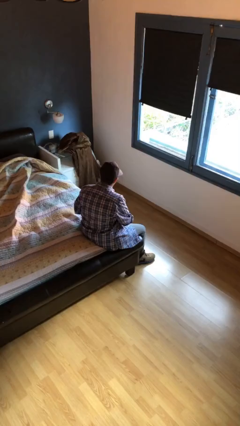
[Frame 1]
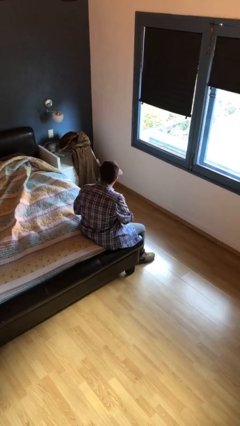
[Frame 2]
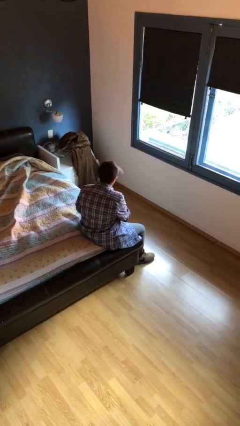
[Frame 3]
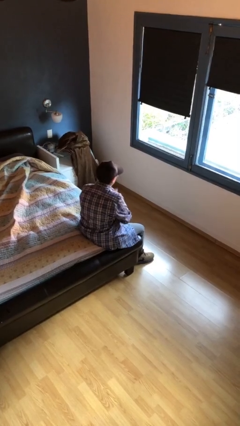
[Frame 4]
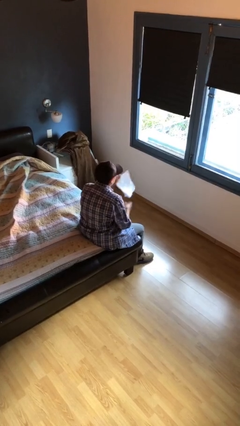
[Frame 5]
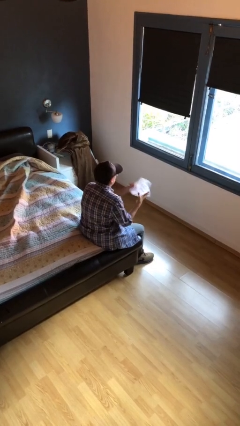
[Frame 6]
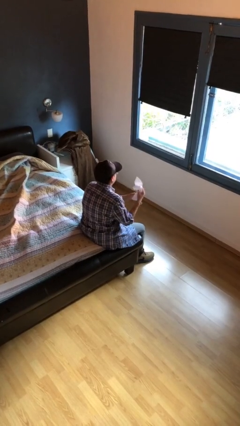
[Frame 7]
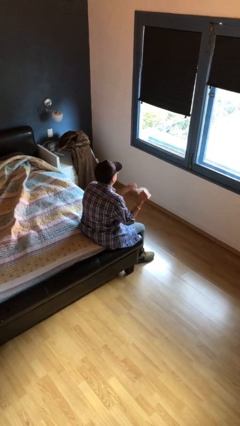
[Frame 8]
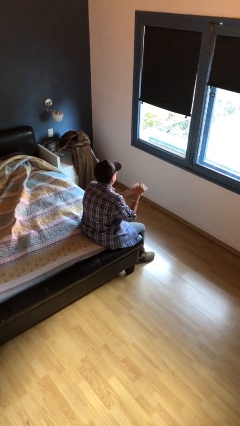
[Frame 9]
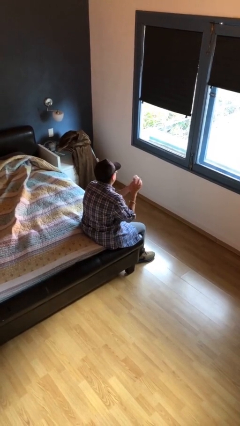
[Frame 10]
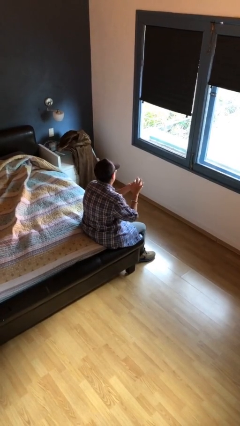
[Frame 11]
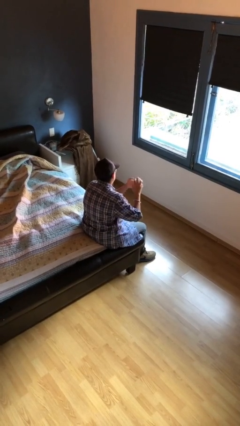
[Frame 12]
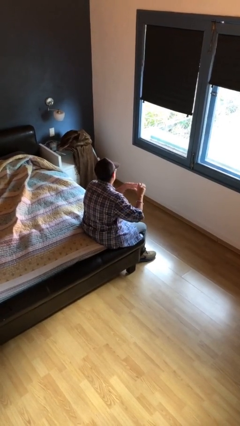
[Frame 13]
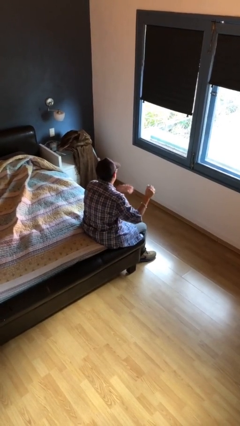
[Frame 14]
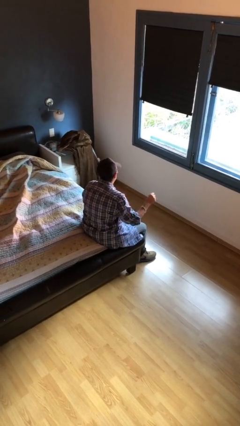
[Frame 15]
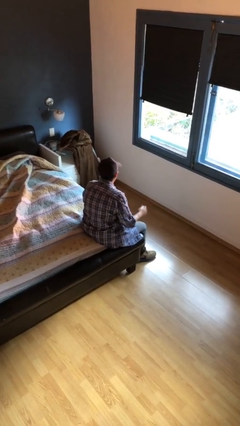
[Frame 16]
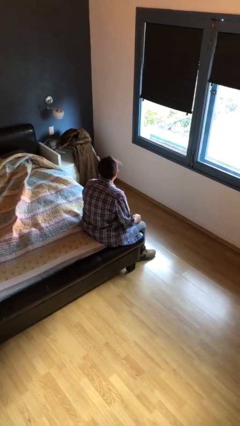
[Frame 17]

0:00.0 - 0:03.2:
person crumples paper

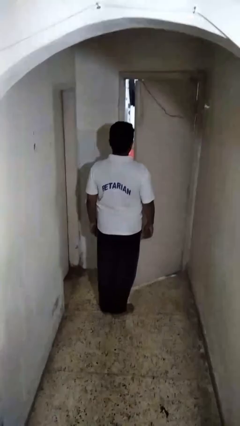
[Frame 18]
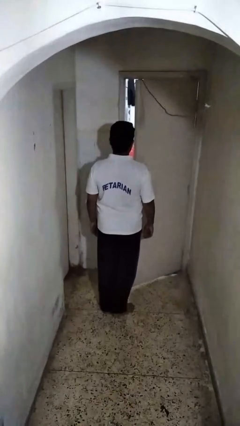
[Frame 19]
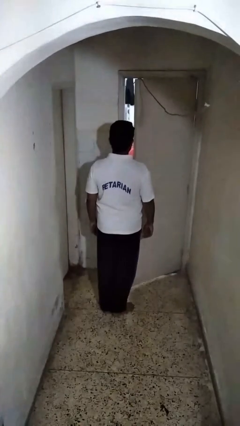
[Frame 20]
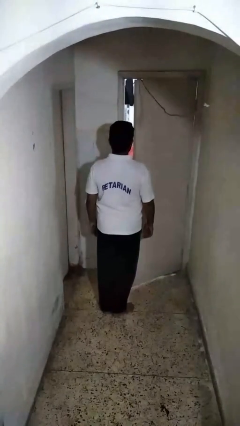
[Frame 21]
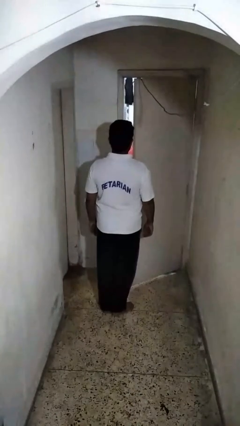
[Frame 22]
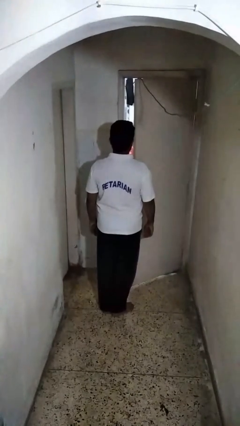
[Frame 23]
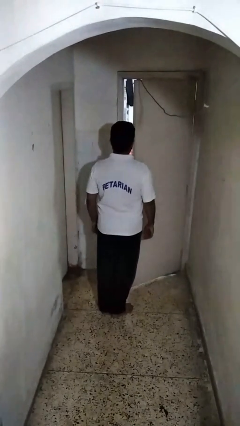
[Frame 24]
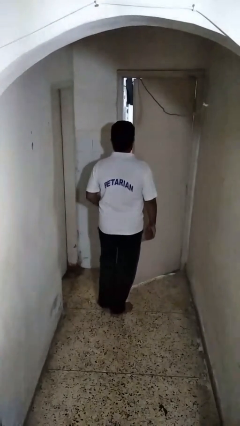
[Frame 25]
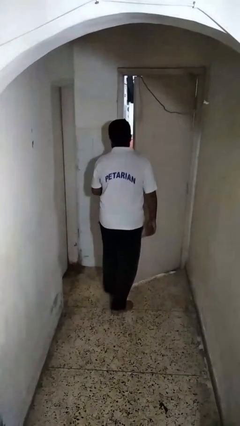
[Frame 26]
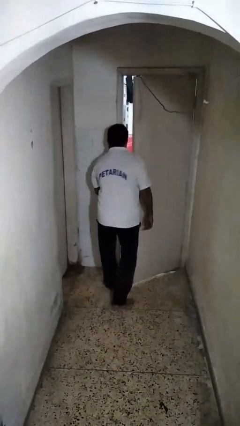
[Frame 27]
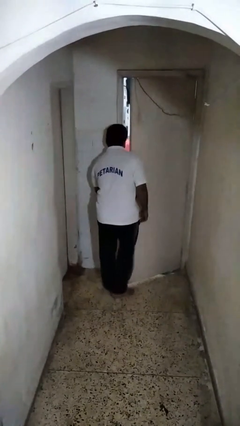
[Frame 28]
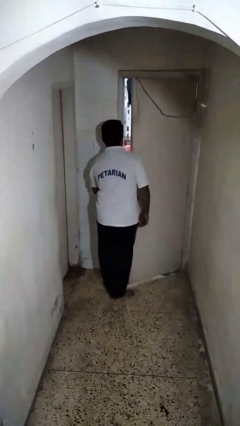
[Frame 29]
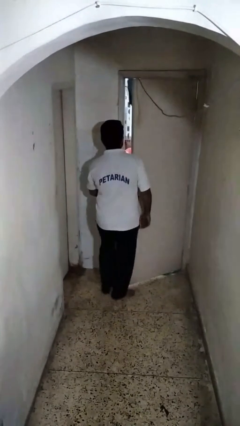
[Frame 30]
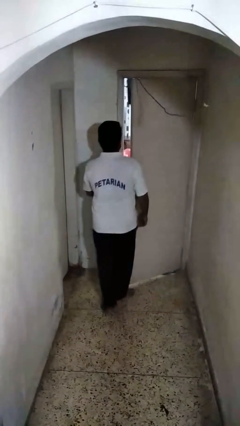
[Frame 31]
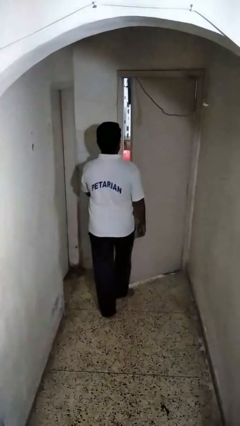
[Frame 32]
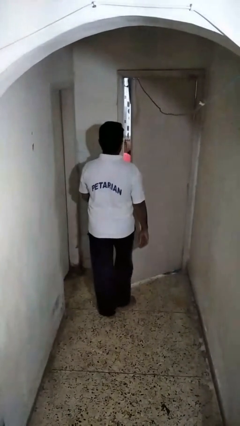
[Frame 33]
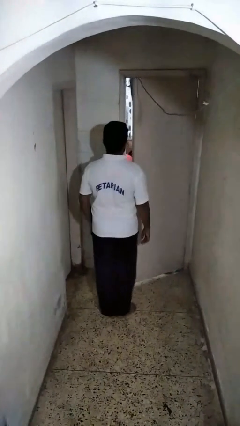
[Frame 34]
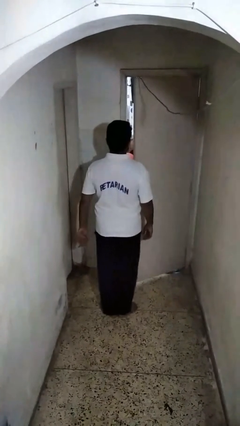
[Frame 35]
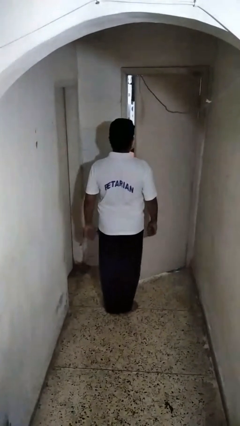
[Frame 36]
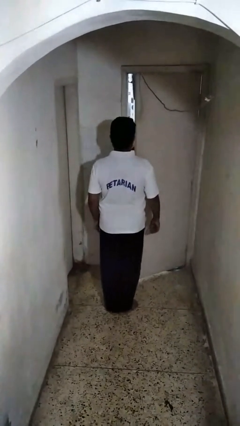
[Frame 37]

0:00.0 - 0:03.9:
person bumps into wall

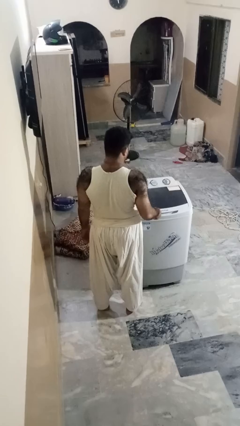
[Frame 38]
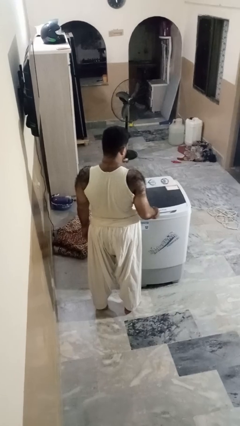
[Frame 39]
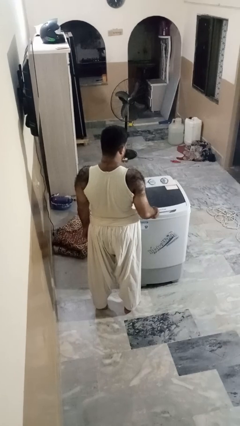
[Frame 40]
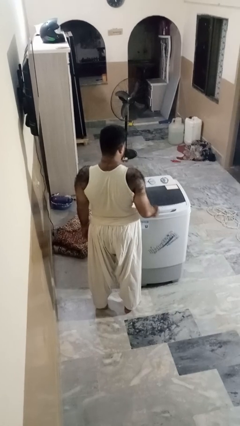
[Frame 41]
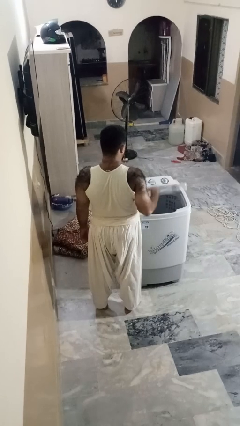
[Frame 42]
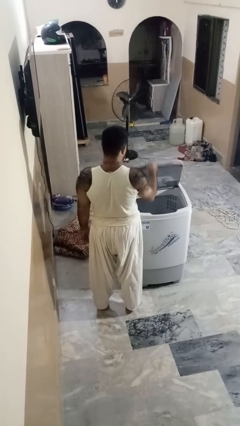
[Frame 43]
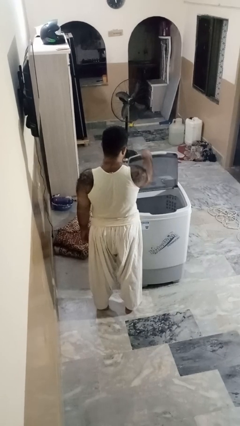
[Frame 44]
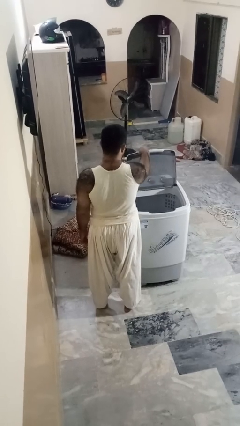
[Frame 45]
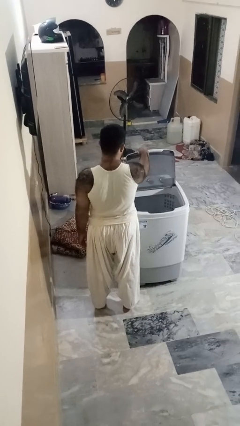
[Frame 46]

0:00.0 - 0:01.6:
person opens clothes washer

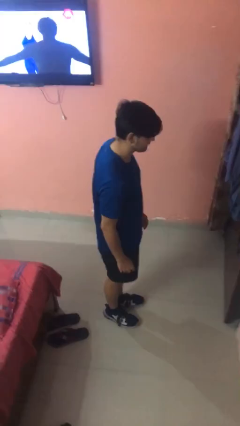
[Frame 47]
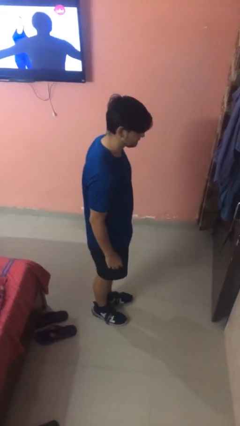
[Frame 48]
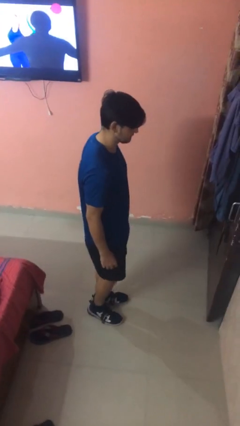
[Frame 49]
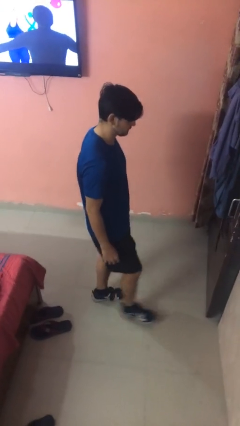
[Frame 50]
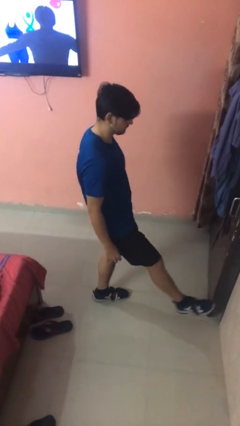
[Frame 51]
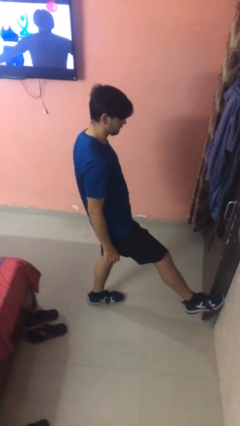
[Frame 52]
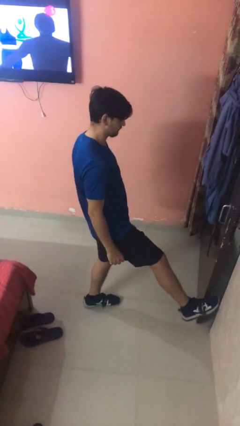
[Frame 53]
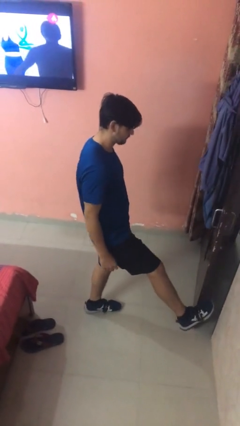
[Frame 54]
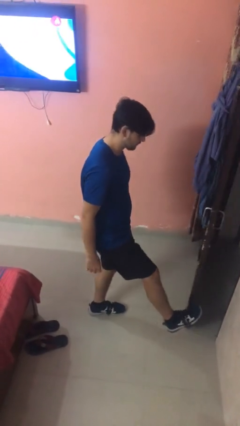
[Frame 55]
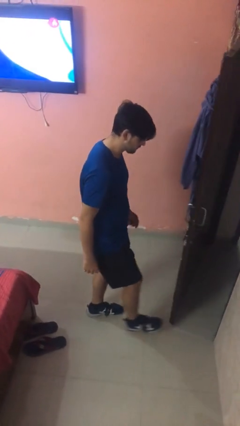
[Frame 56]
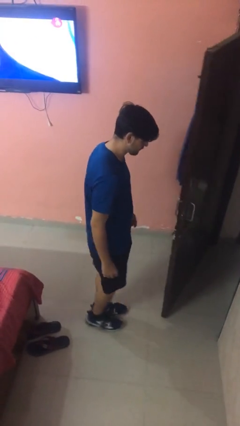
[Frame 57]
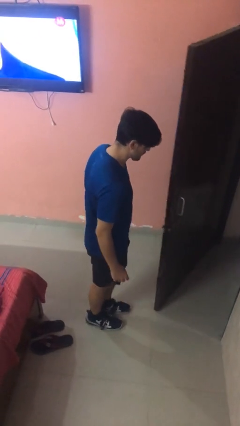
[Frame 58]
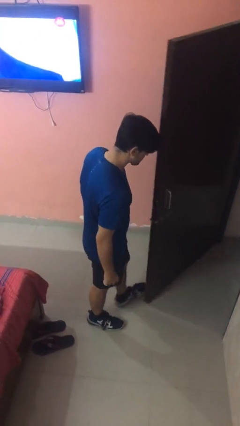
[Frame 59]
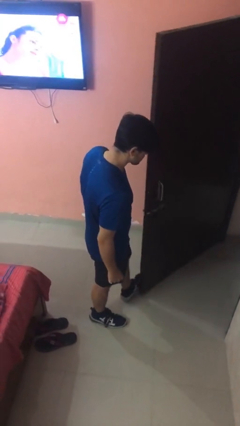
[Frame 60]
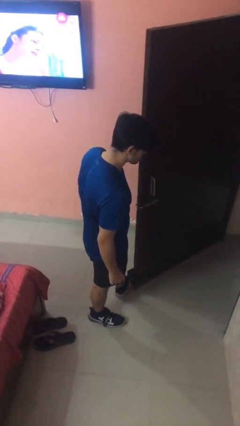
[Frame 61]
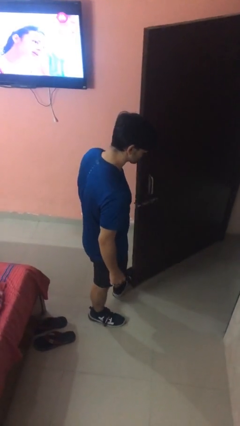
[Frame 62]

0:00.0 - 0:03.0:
person opens facility door

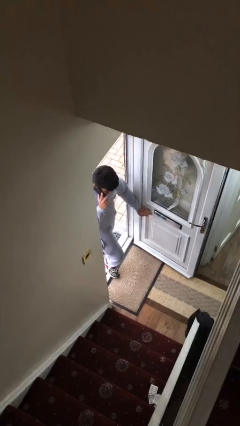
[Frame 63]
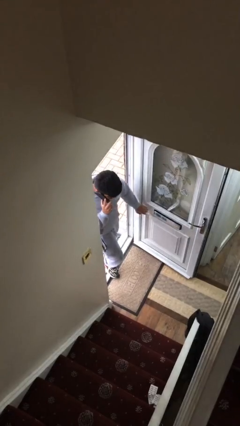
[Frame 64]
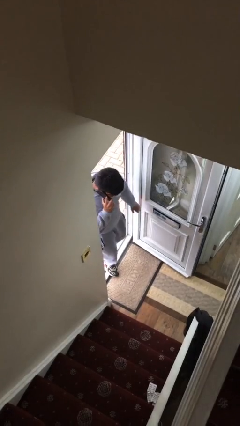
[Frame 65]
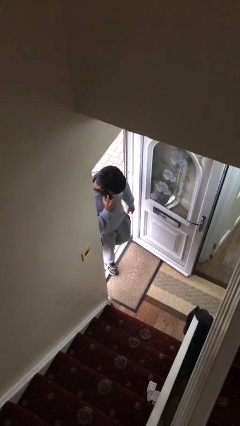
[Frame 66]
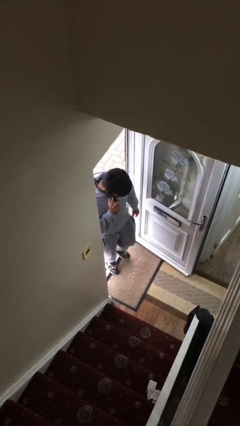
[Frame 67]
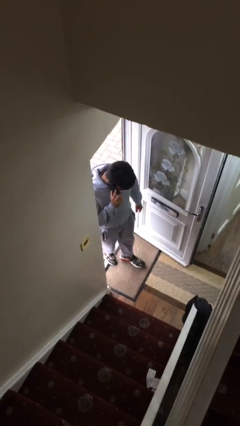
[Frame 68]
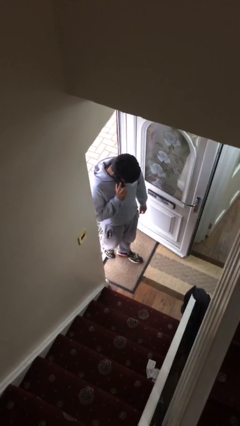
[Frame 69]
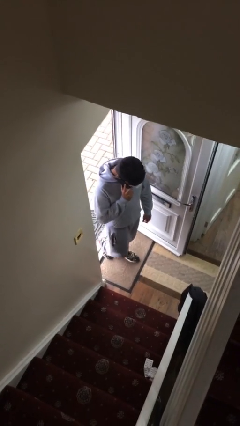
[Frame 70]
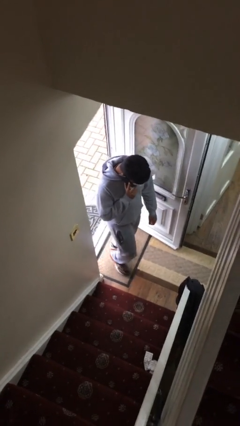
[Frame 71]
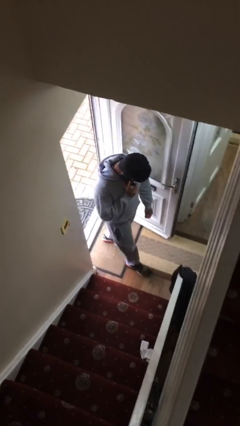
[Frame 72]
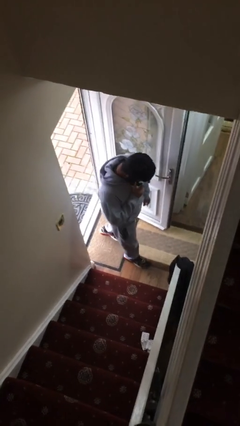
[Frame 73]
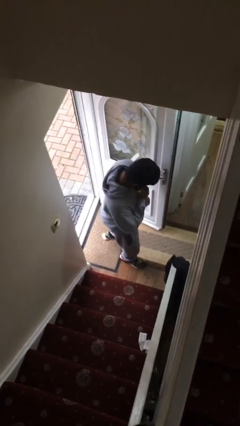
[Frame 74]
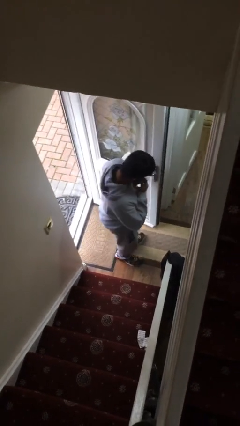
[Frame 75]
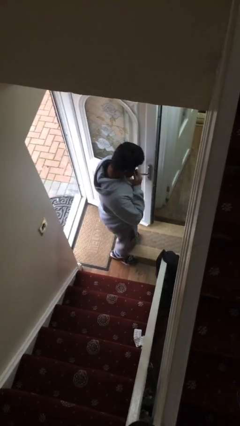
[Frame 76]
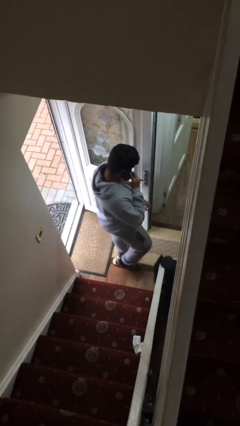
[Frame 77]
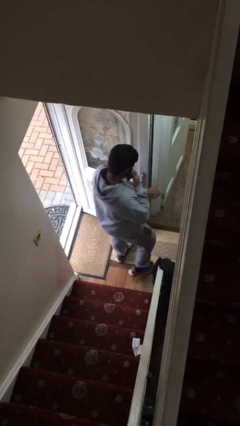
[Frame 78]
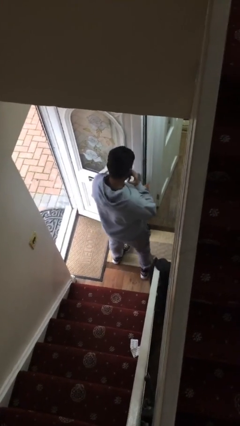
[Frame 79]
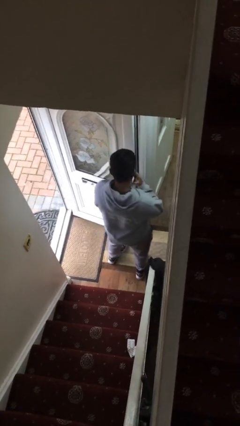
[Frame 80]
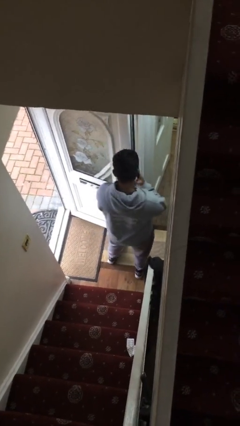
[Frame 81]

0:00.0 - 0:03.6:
person enters scene through structure

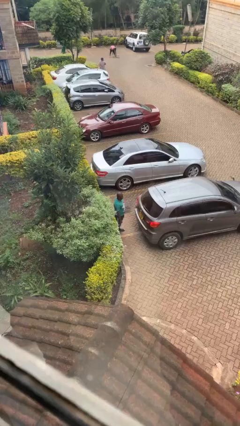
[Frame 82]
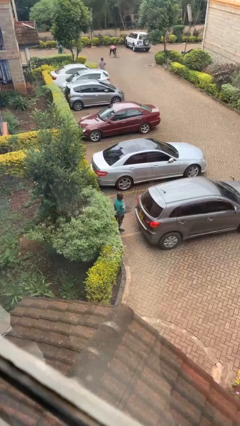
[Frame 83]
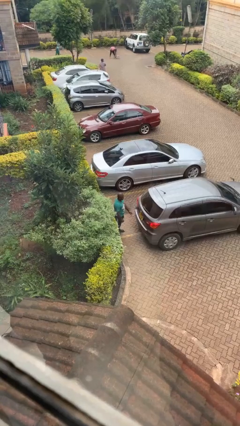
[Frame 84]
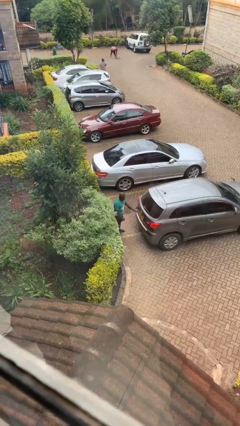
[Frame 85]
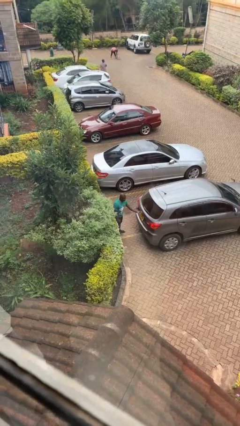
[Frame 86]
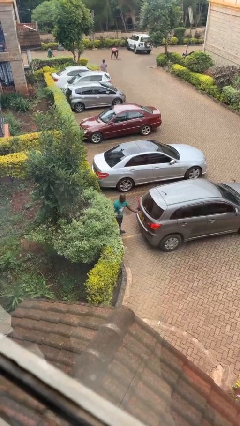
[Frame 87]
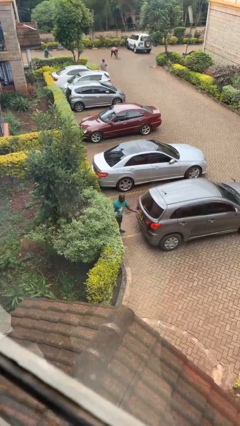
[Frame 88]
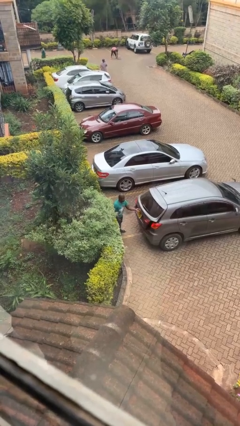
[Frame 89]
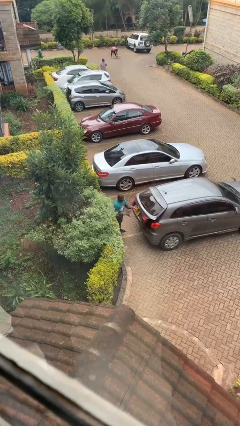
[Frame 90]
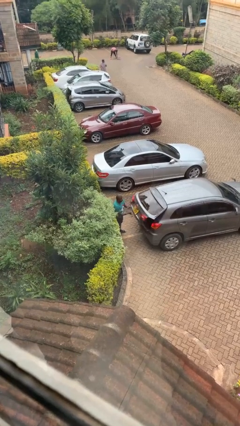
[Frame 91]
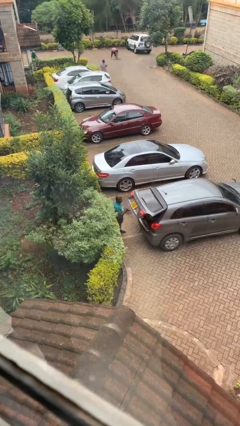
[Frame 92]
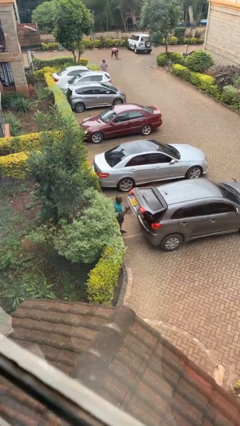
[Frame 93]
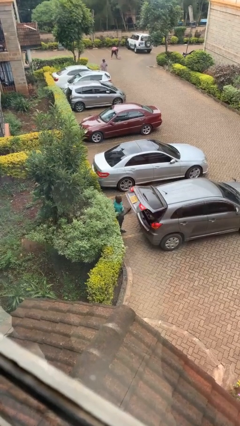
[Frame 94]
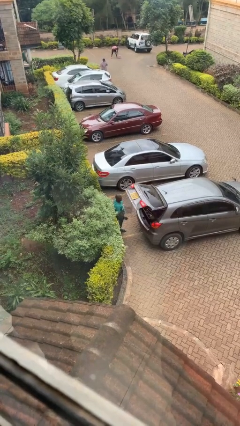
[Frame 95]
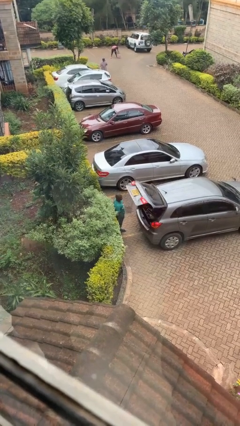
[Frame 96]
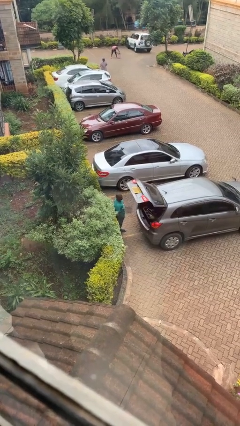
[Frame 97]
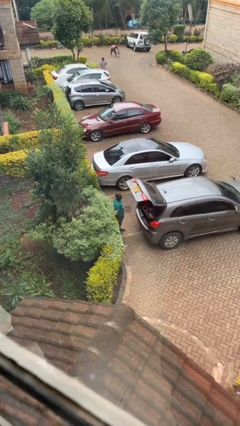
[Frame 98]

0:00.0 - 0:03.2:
person opens car trunk
